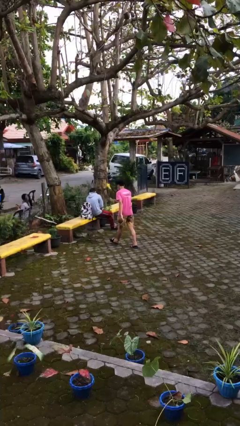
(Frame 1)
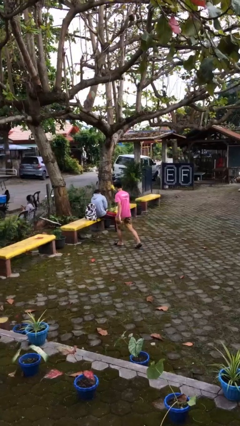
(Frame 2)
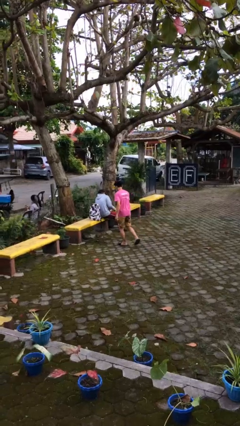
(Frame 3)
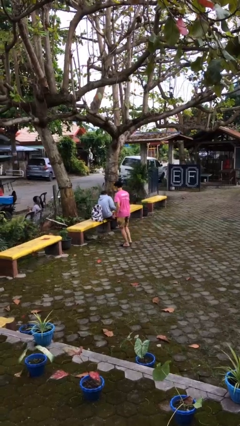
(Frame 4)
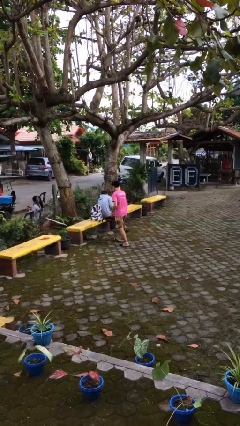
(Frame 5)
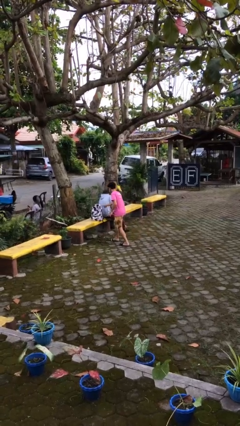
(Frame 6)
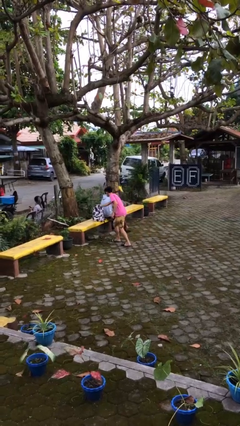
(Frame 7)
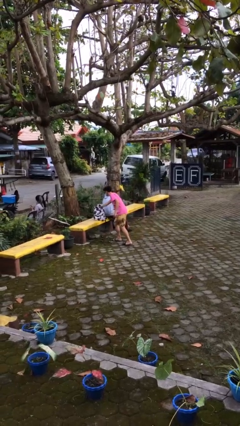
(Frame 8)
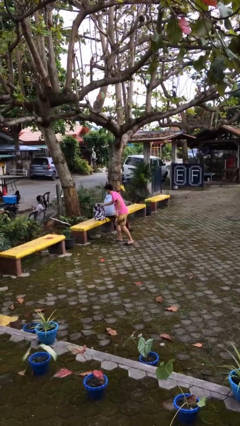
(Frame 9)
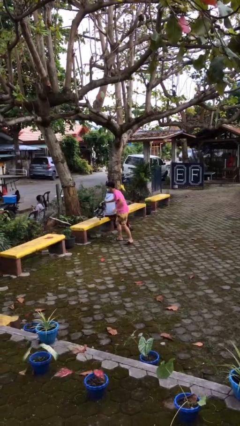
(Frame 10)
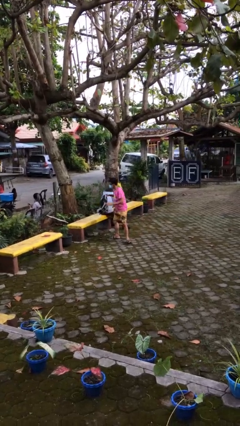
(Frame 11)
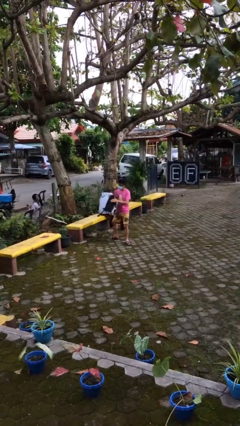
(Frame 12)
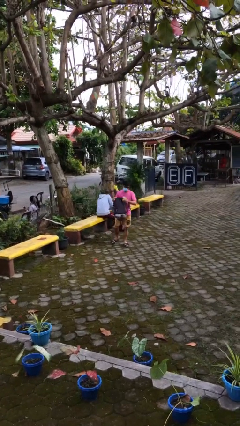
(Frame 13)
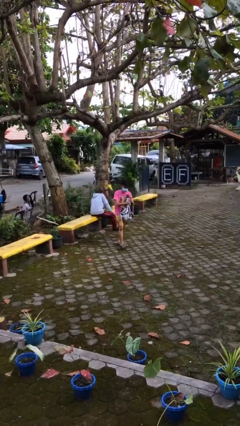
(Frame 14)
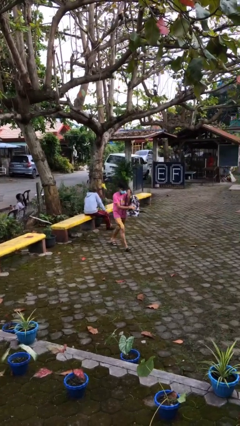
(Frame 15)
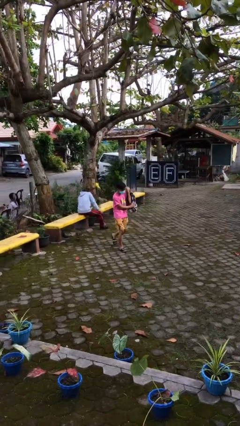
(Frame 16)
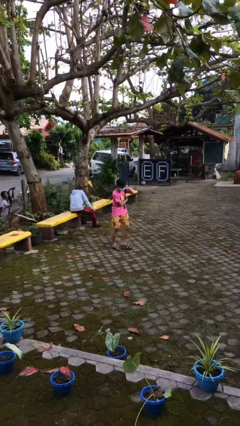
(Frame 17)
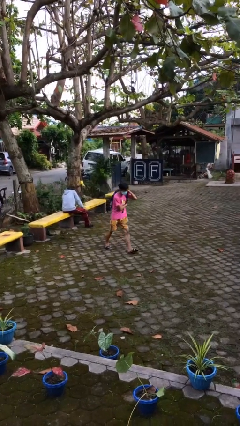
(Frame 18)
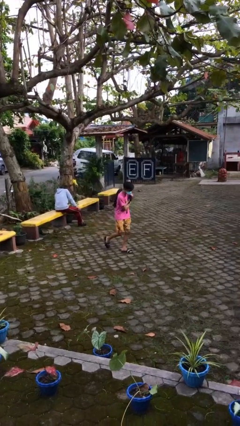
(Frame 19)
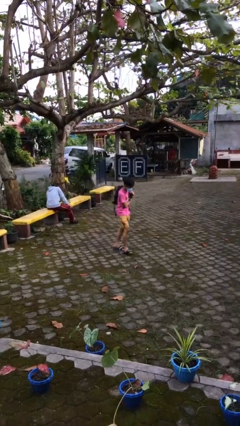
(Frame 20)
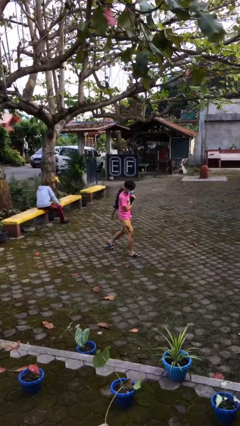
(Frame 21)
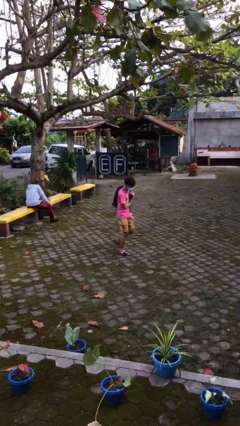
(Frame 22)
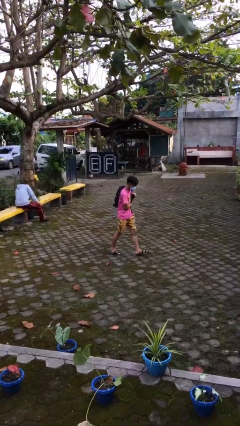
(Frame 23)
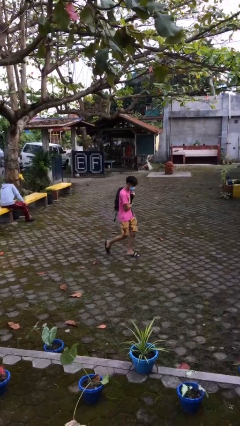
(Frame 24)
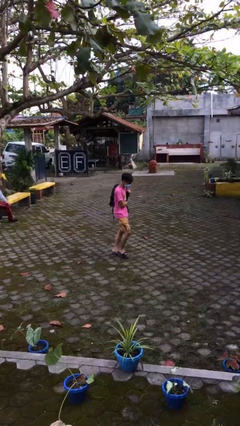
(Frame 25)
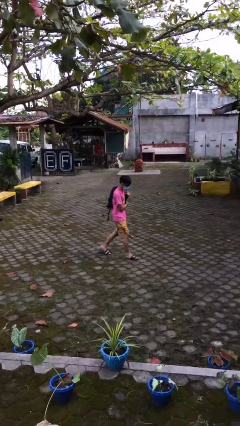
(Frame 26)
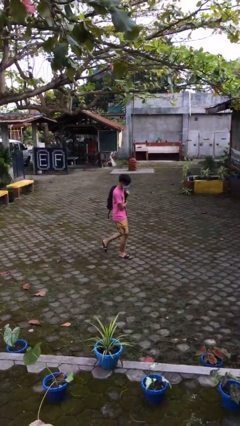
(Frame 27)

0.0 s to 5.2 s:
person steals object from person

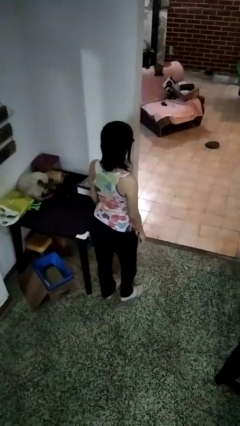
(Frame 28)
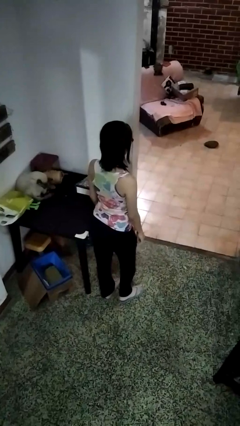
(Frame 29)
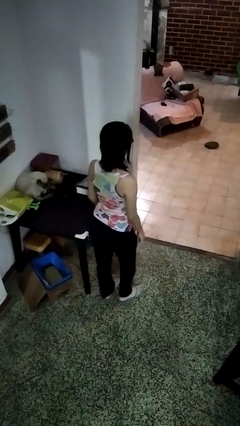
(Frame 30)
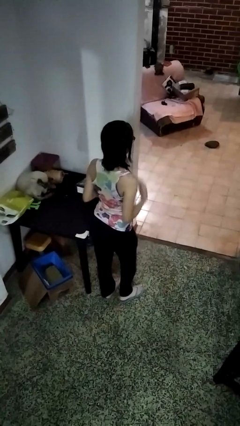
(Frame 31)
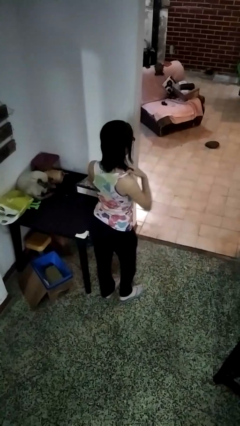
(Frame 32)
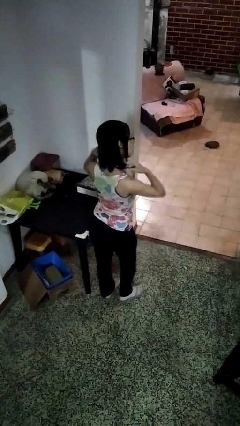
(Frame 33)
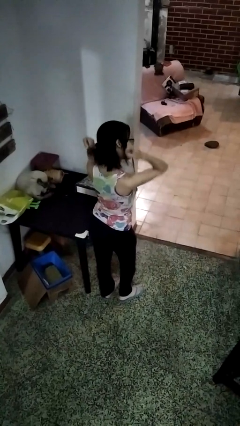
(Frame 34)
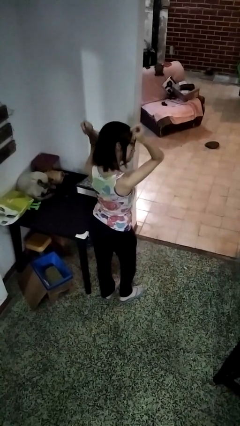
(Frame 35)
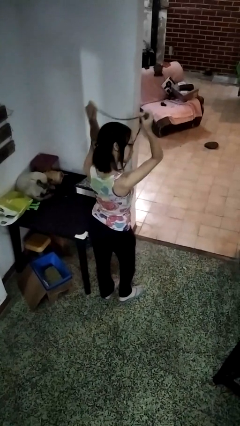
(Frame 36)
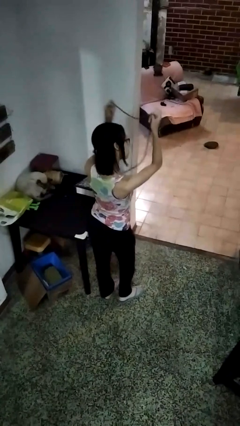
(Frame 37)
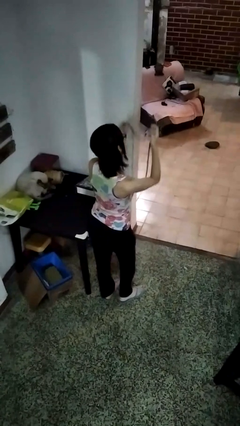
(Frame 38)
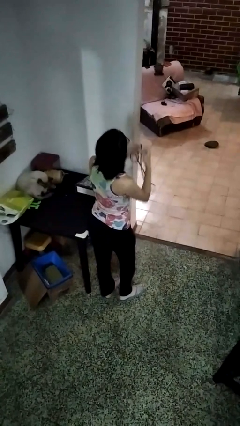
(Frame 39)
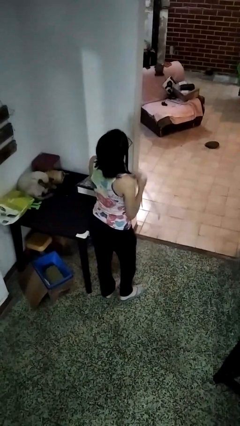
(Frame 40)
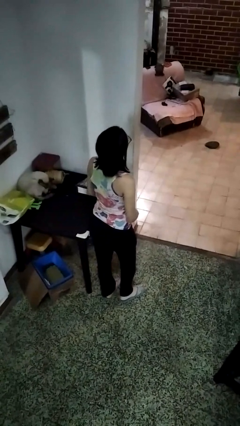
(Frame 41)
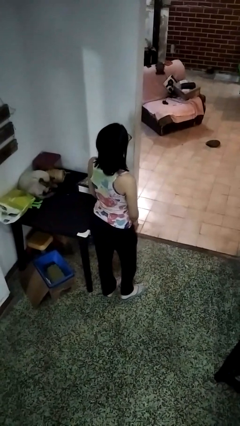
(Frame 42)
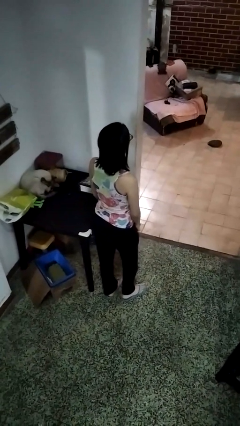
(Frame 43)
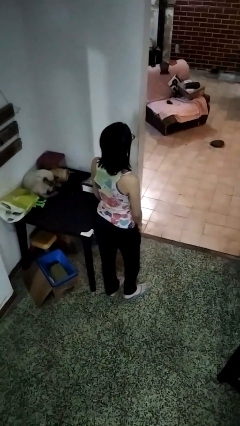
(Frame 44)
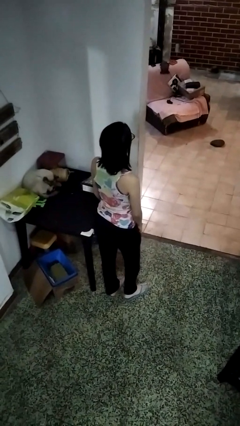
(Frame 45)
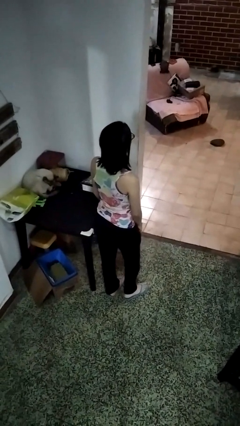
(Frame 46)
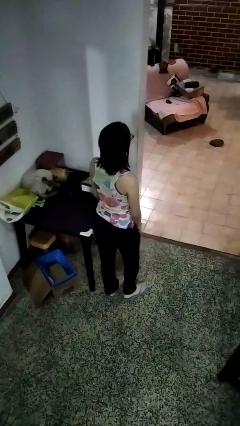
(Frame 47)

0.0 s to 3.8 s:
person takes off necklace

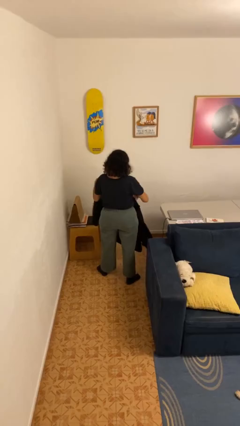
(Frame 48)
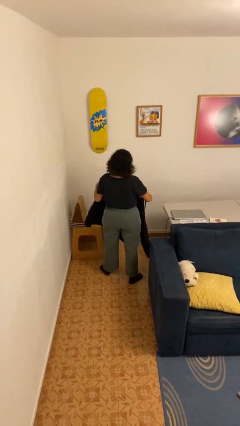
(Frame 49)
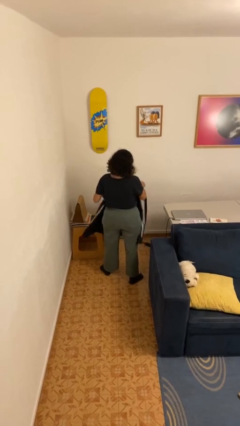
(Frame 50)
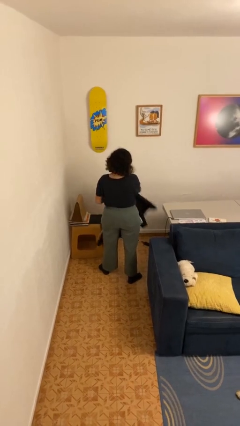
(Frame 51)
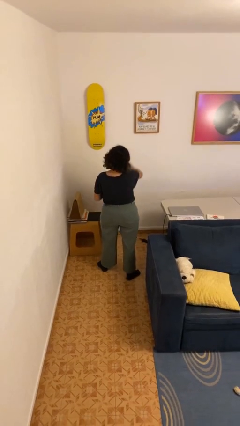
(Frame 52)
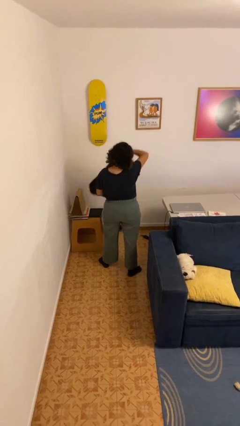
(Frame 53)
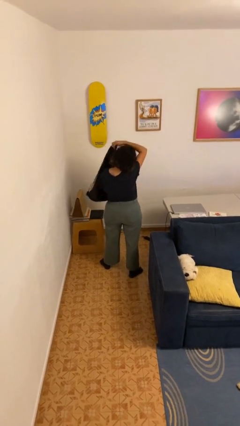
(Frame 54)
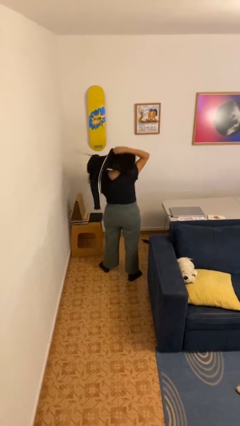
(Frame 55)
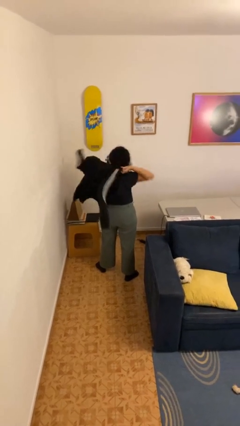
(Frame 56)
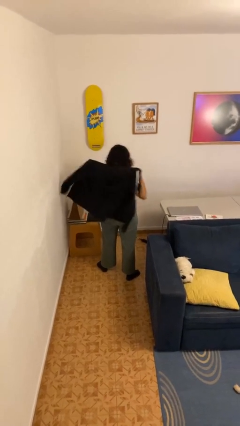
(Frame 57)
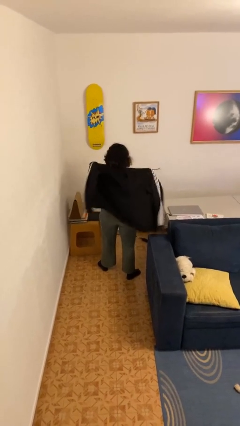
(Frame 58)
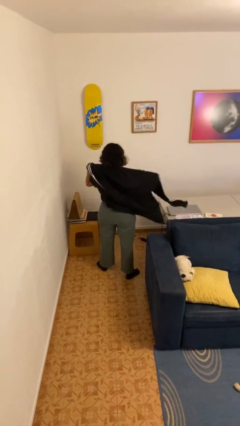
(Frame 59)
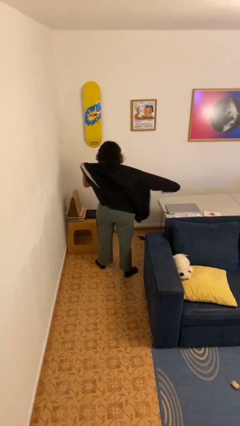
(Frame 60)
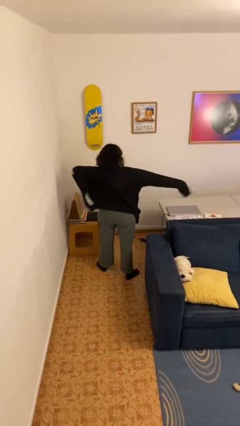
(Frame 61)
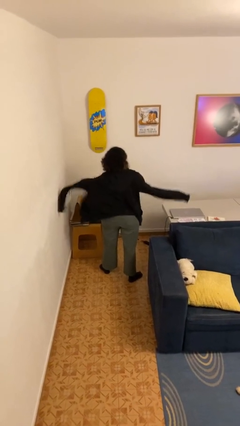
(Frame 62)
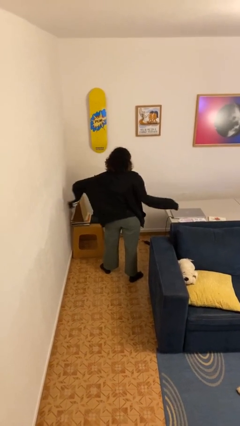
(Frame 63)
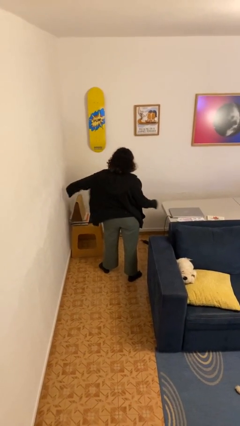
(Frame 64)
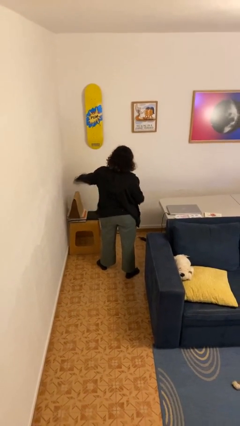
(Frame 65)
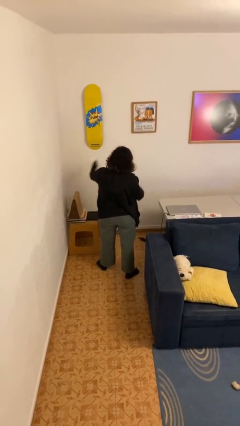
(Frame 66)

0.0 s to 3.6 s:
person puts on hoodie

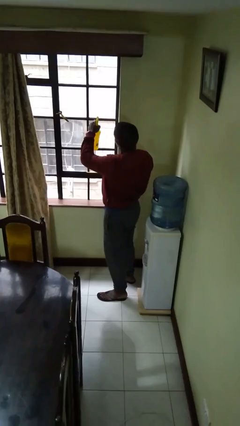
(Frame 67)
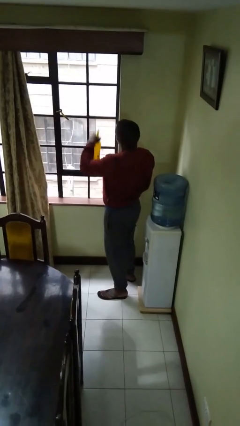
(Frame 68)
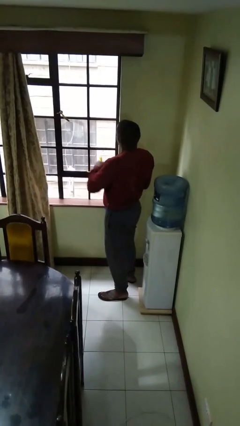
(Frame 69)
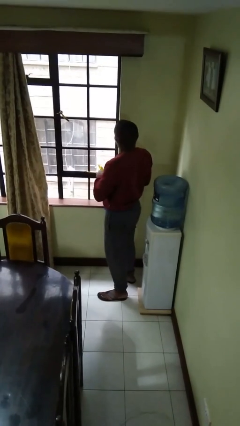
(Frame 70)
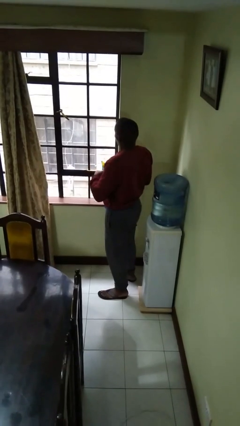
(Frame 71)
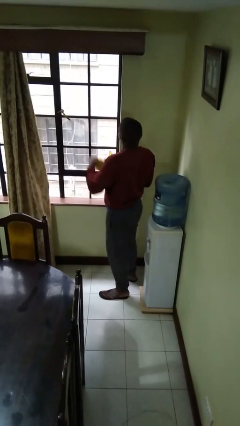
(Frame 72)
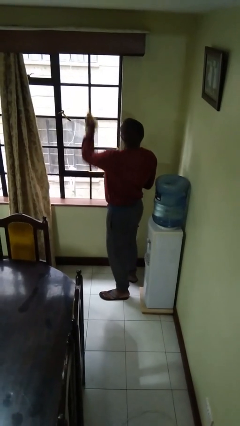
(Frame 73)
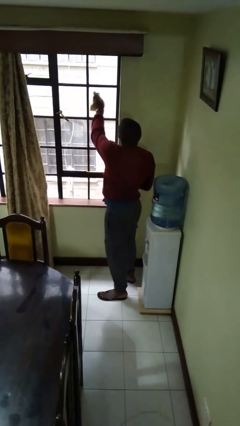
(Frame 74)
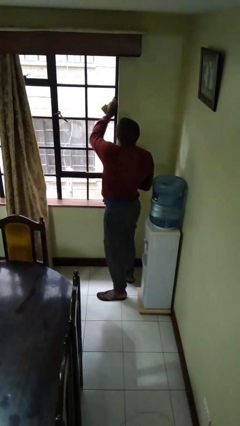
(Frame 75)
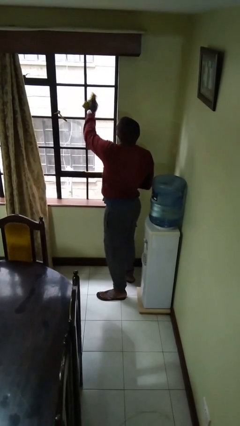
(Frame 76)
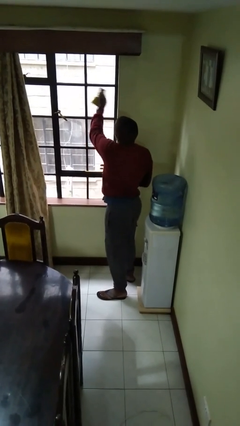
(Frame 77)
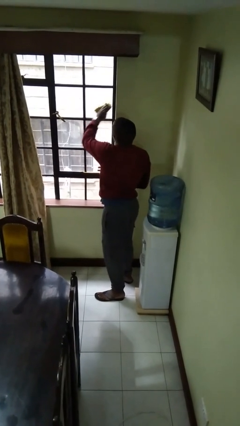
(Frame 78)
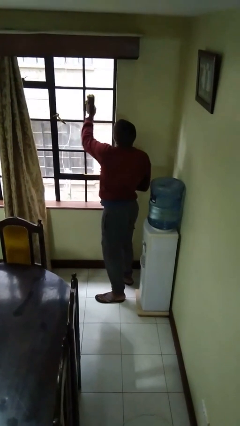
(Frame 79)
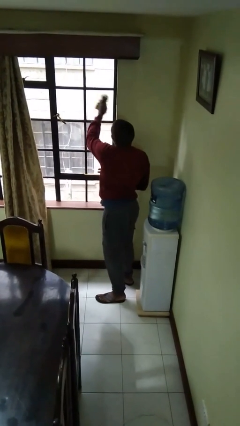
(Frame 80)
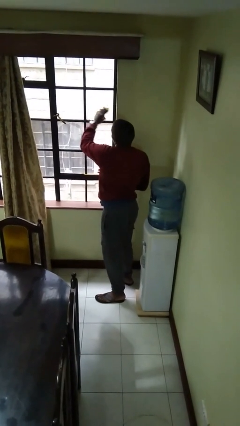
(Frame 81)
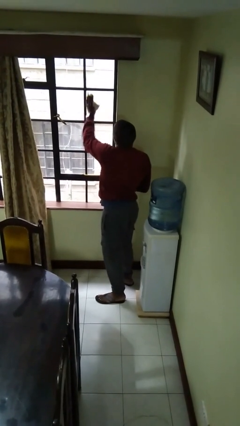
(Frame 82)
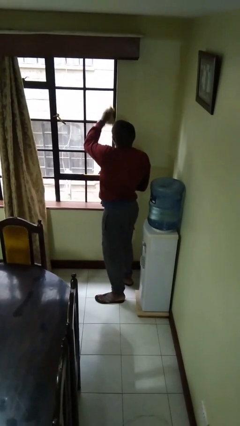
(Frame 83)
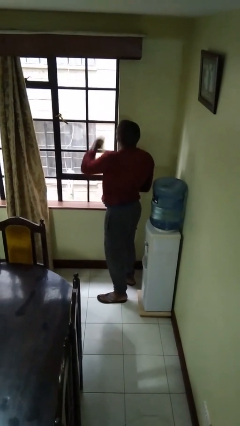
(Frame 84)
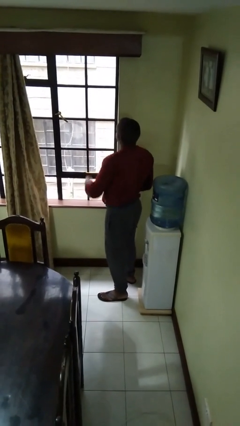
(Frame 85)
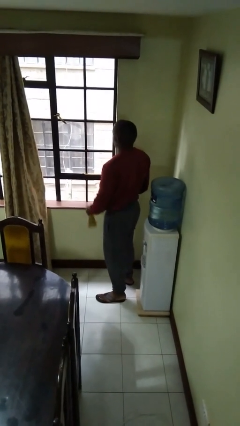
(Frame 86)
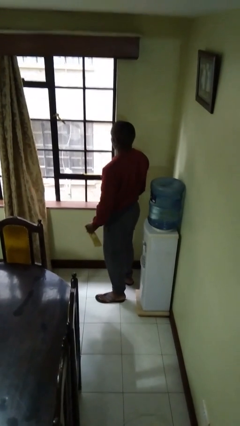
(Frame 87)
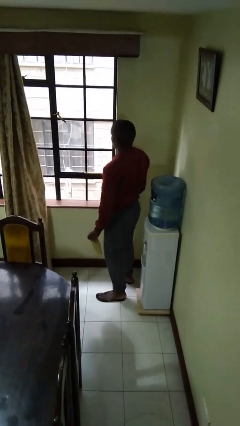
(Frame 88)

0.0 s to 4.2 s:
person washes window

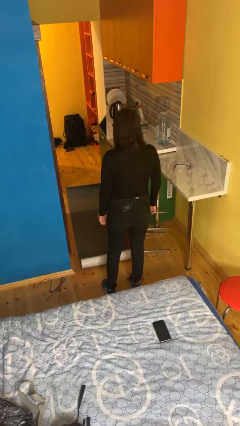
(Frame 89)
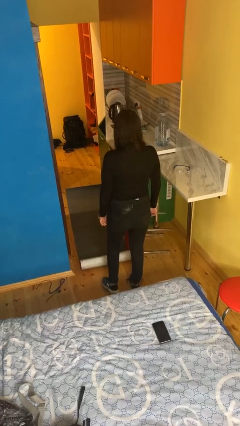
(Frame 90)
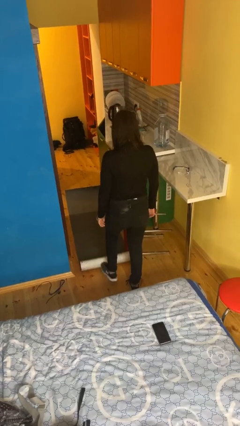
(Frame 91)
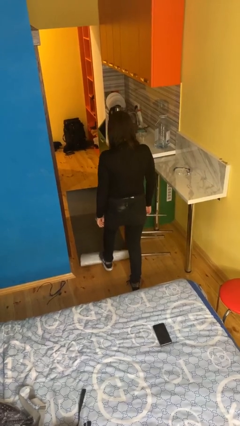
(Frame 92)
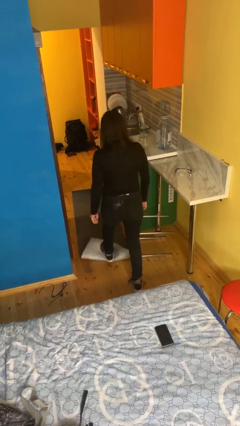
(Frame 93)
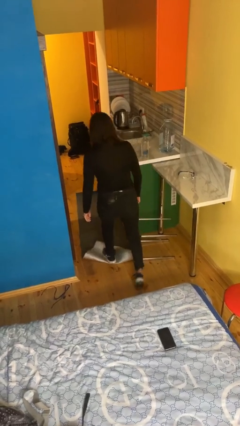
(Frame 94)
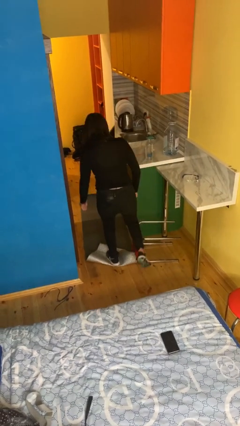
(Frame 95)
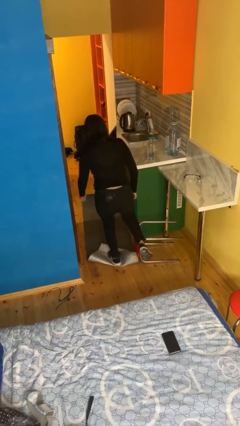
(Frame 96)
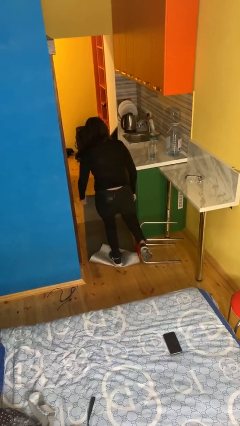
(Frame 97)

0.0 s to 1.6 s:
person trips on object on floor
